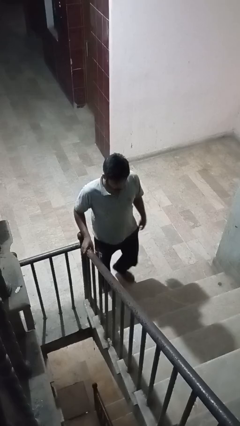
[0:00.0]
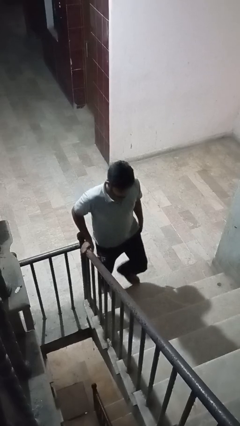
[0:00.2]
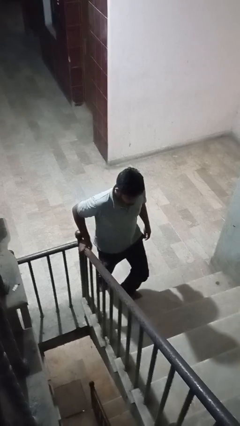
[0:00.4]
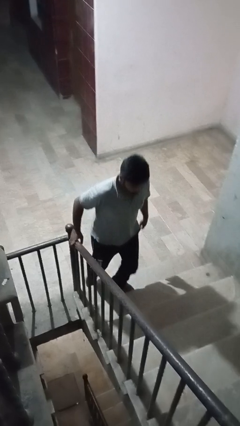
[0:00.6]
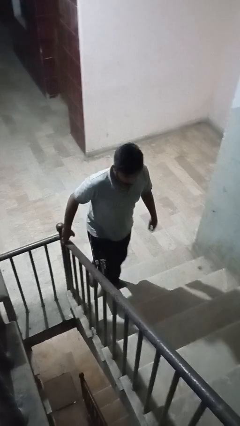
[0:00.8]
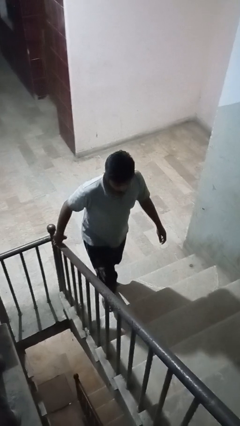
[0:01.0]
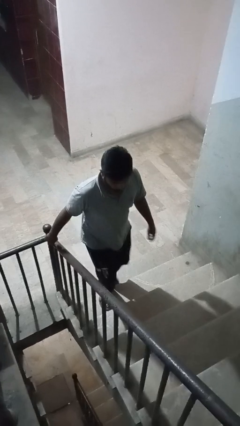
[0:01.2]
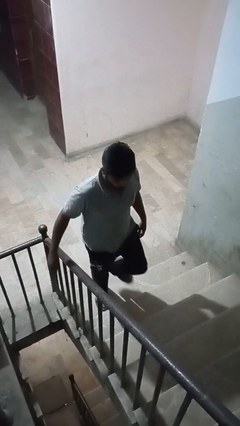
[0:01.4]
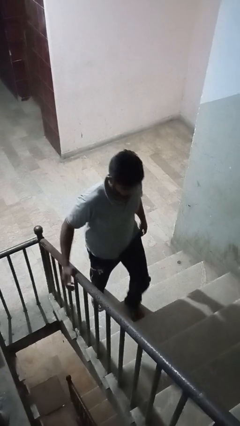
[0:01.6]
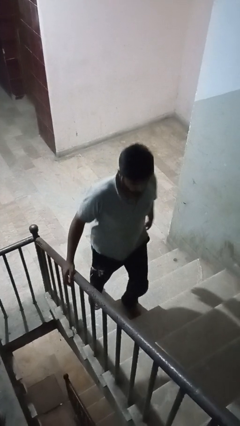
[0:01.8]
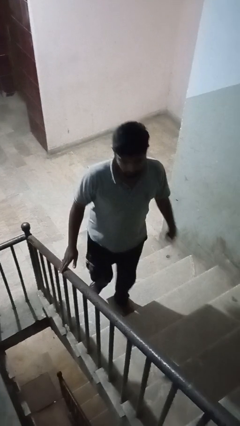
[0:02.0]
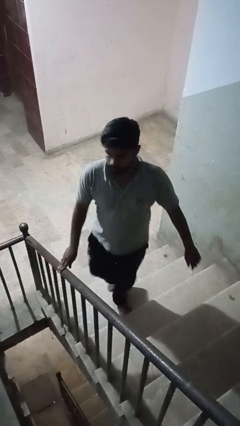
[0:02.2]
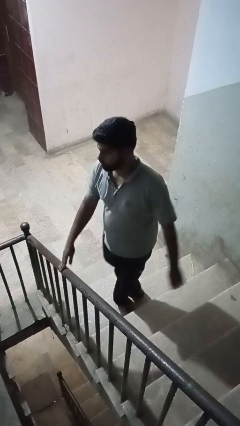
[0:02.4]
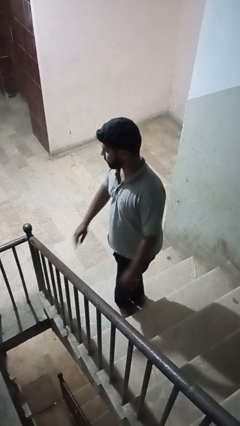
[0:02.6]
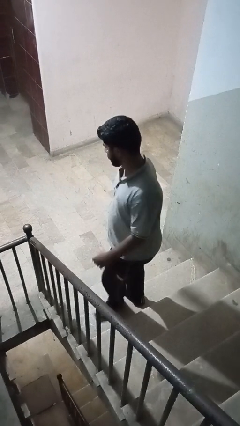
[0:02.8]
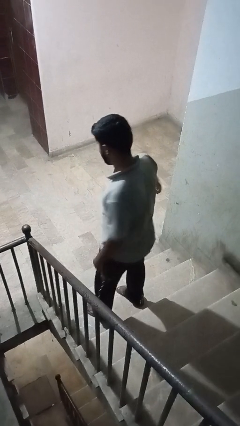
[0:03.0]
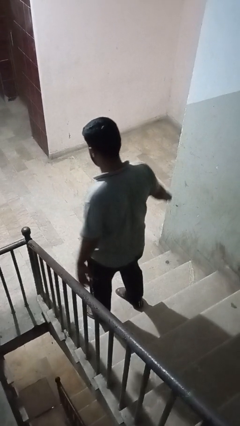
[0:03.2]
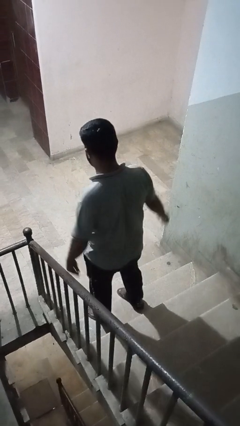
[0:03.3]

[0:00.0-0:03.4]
person climbs up stairs

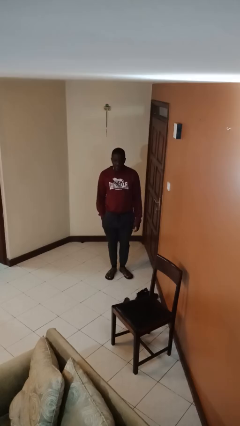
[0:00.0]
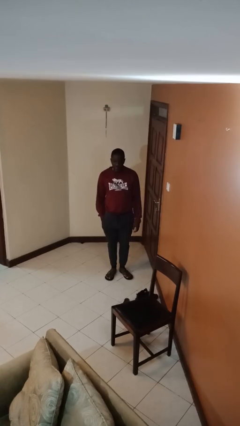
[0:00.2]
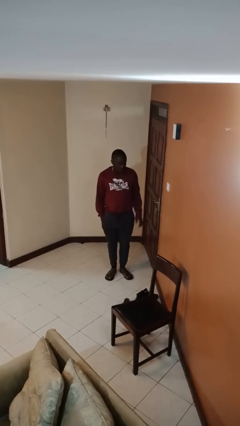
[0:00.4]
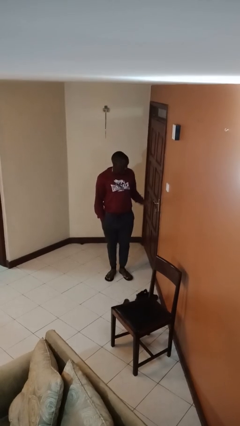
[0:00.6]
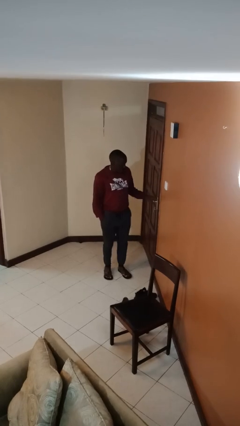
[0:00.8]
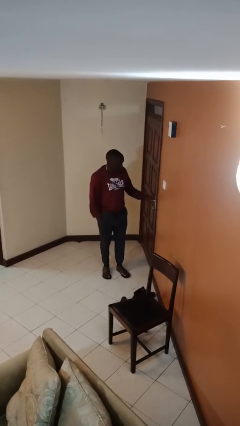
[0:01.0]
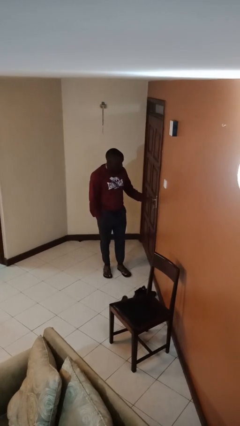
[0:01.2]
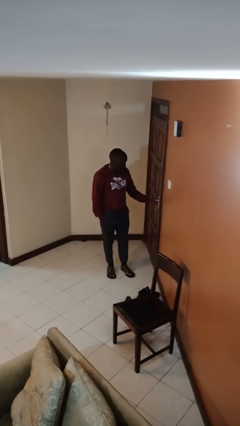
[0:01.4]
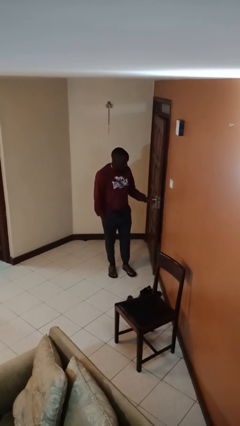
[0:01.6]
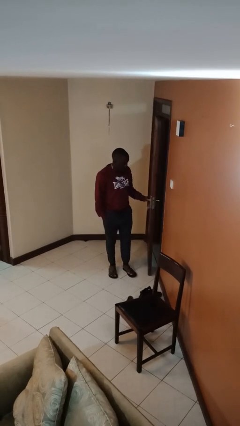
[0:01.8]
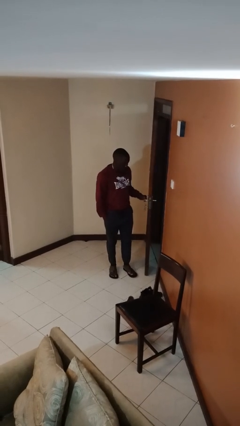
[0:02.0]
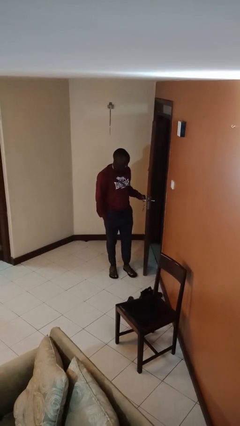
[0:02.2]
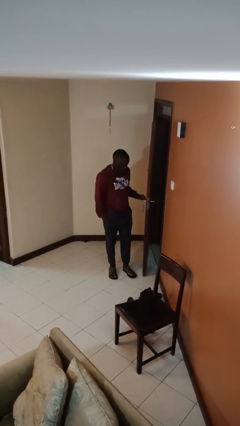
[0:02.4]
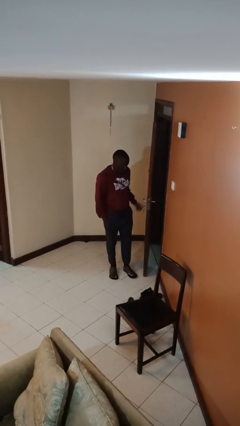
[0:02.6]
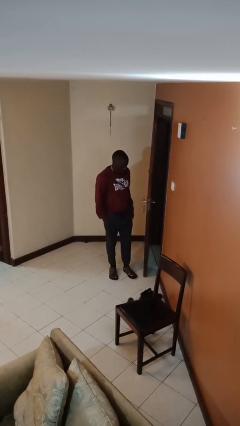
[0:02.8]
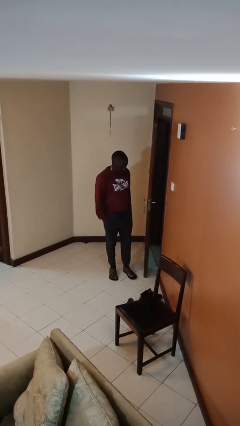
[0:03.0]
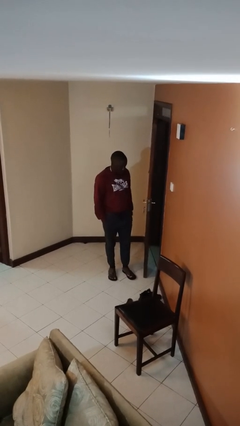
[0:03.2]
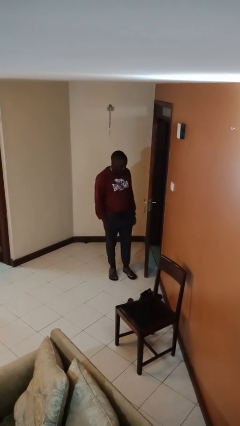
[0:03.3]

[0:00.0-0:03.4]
person opens facility door

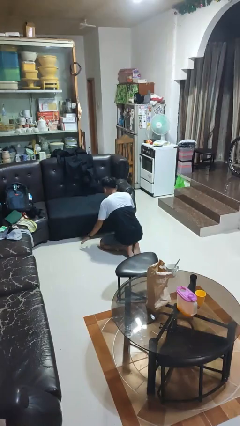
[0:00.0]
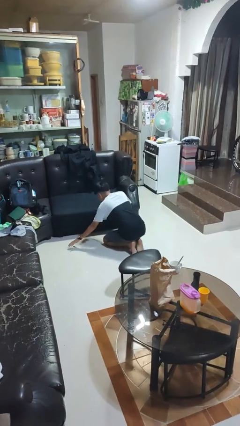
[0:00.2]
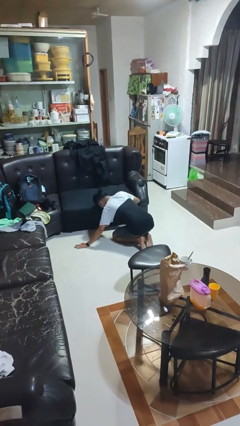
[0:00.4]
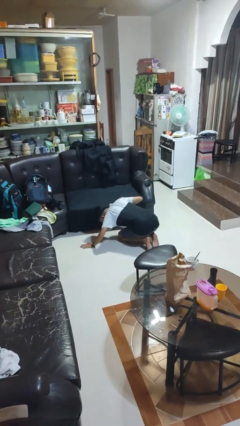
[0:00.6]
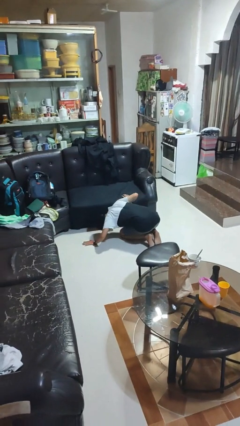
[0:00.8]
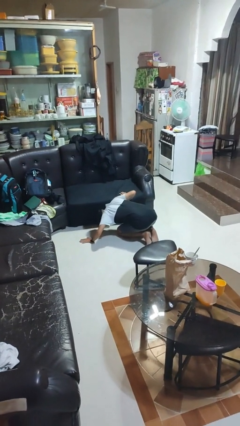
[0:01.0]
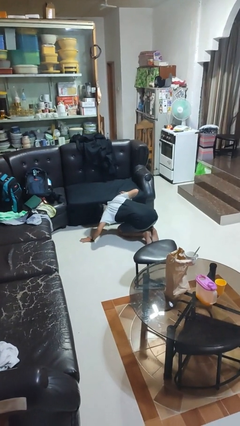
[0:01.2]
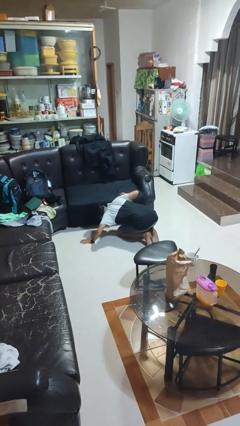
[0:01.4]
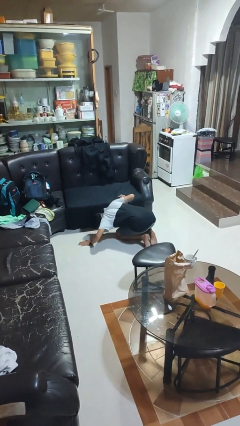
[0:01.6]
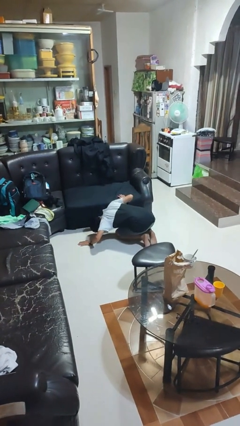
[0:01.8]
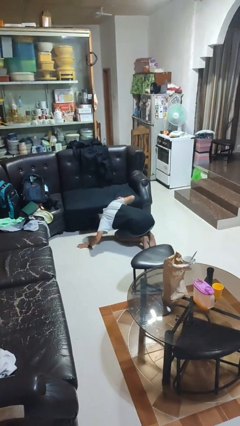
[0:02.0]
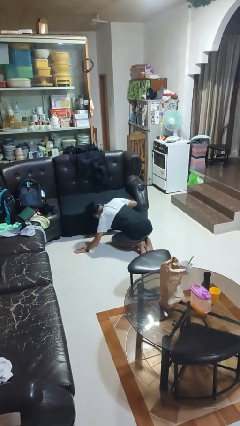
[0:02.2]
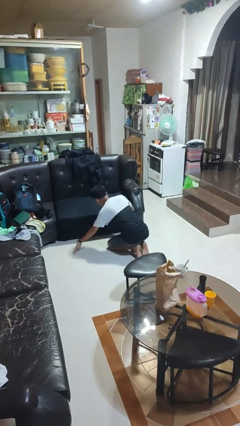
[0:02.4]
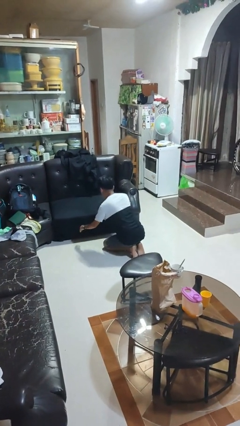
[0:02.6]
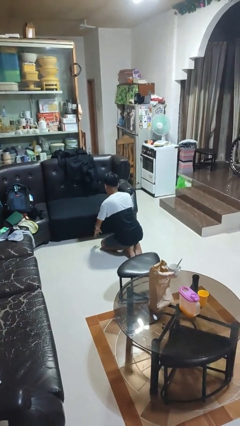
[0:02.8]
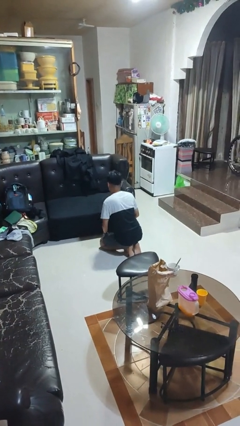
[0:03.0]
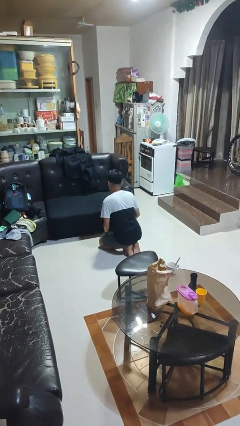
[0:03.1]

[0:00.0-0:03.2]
person searches under couch

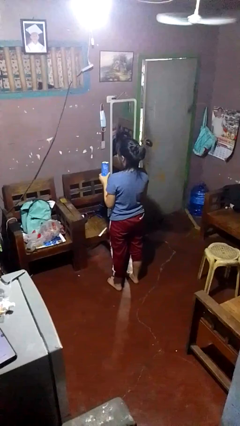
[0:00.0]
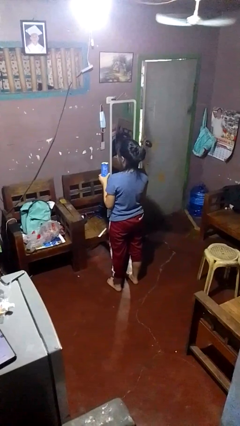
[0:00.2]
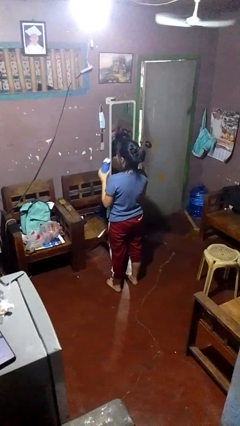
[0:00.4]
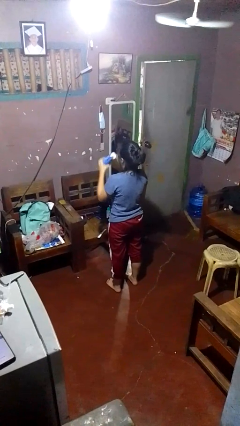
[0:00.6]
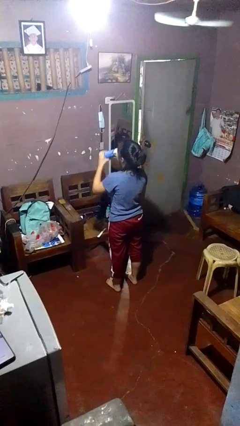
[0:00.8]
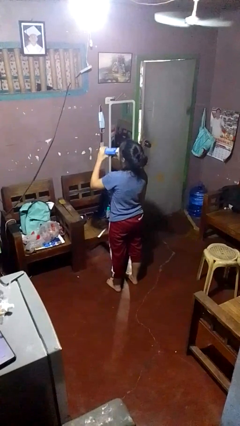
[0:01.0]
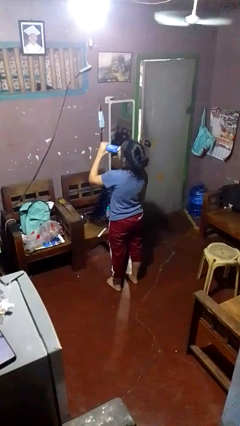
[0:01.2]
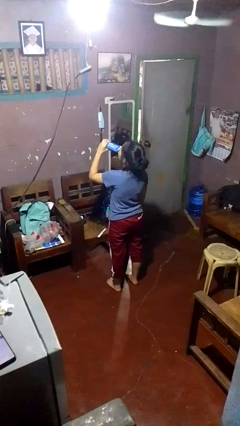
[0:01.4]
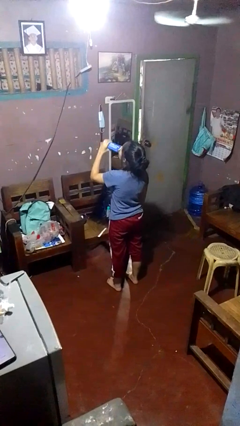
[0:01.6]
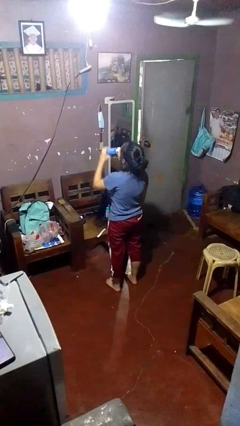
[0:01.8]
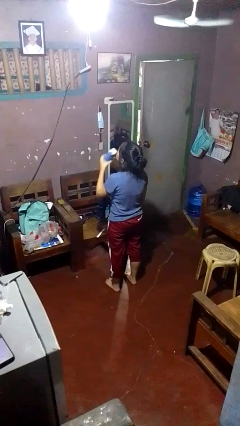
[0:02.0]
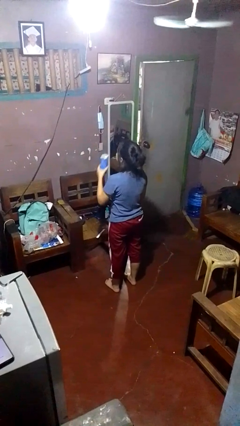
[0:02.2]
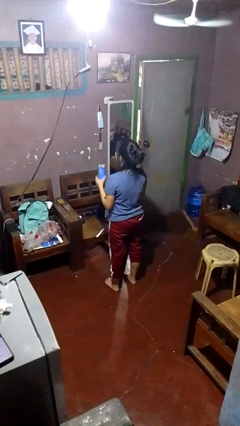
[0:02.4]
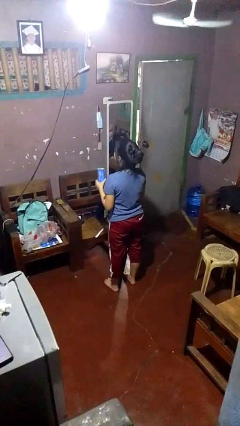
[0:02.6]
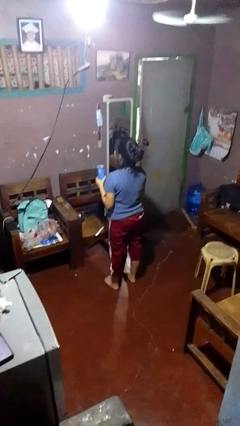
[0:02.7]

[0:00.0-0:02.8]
person drinks from beverage can

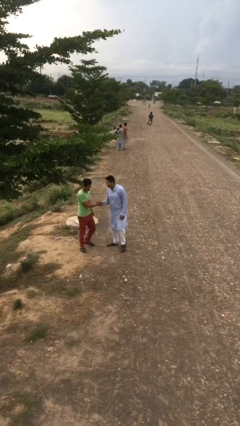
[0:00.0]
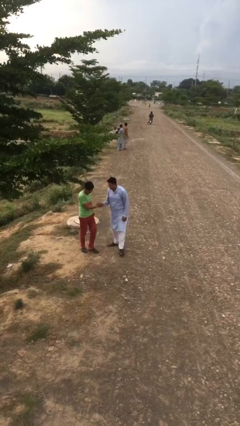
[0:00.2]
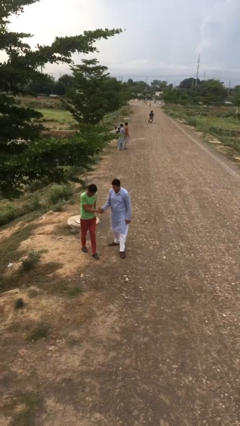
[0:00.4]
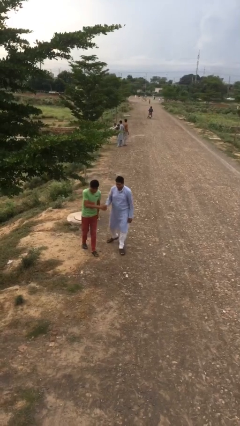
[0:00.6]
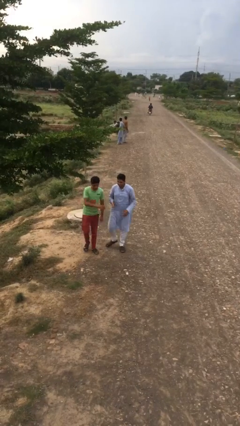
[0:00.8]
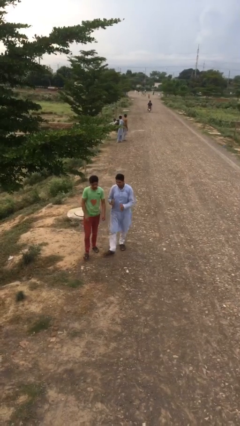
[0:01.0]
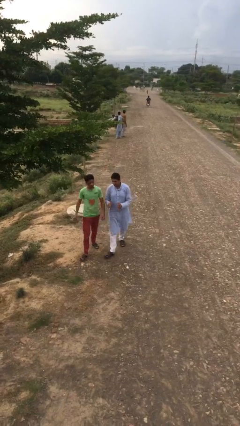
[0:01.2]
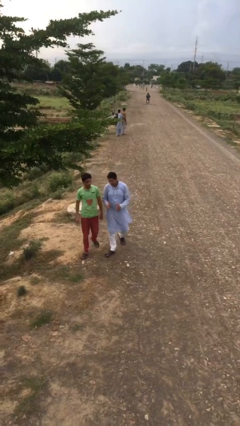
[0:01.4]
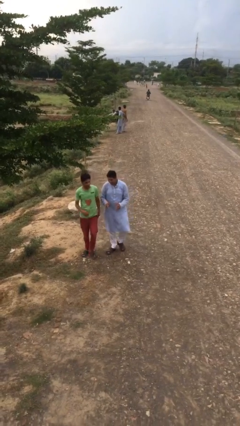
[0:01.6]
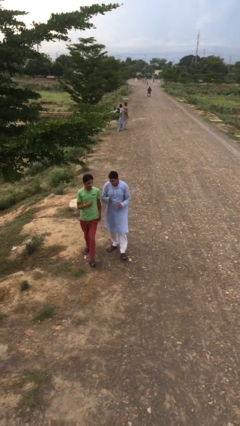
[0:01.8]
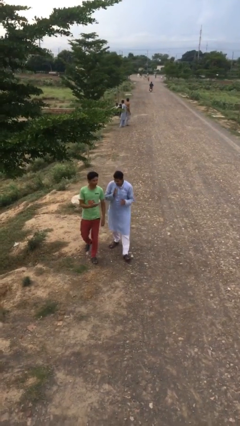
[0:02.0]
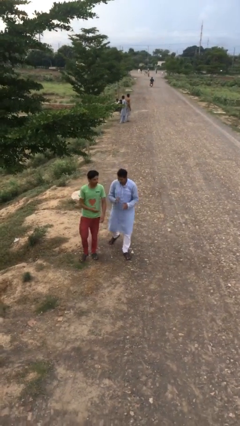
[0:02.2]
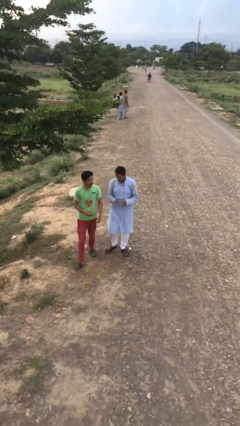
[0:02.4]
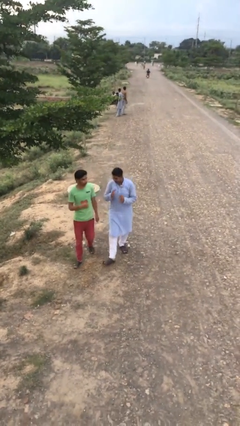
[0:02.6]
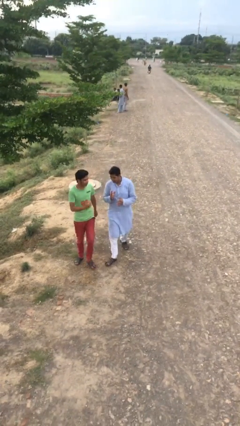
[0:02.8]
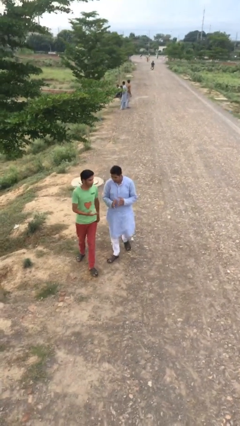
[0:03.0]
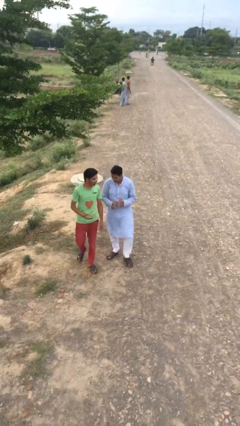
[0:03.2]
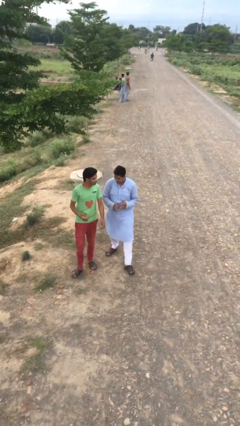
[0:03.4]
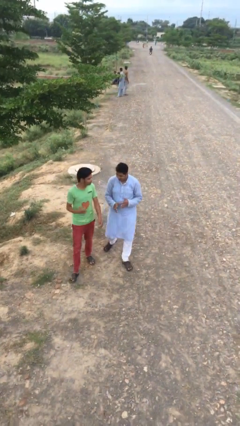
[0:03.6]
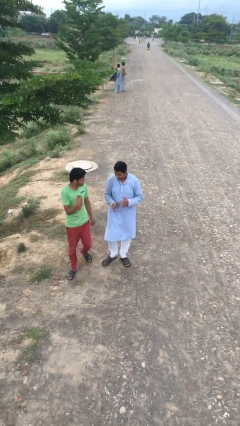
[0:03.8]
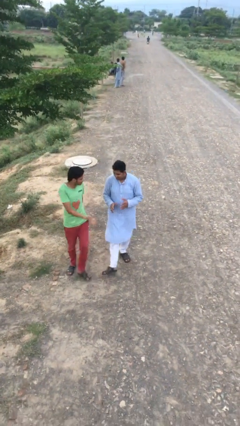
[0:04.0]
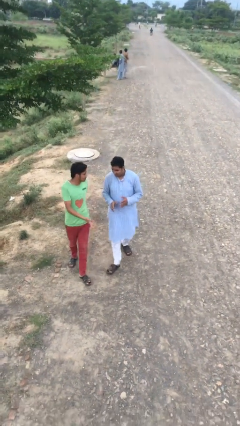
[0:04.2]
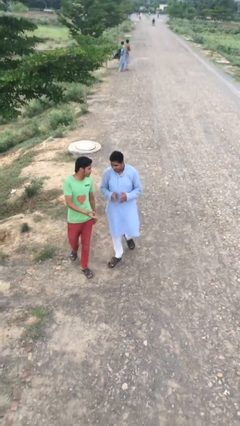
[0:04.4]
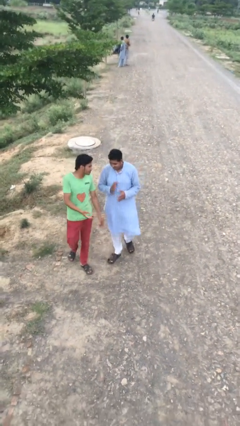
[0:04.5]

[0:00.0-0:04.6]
person talks to person

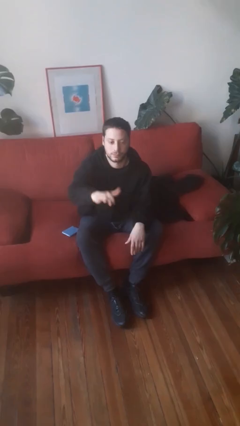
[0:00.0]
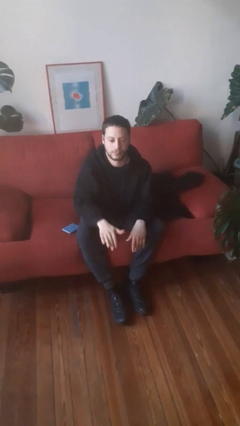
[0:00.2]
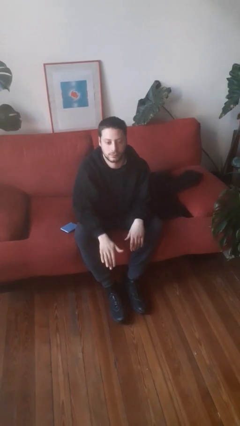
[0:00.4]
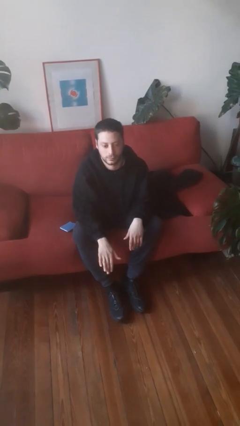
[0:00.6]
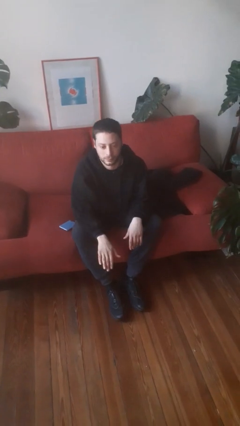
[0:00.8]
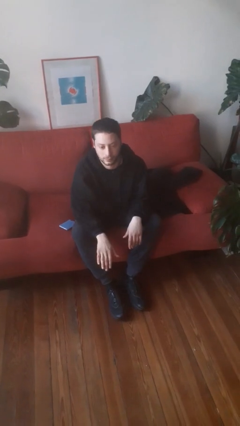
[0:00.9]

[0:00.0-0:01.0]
person gestures swipe down
